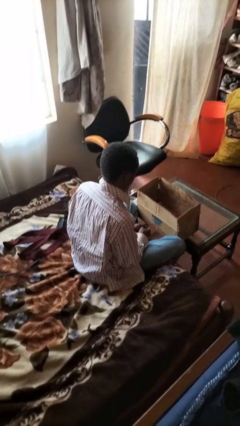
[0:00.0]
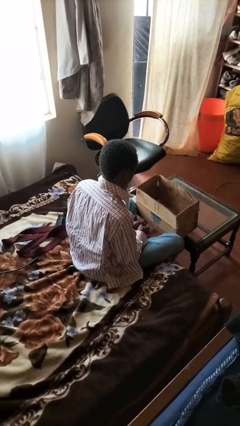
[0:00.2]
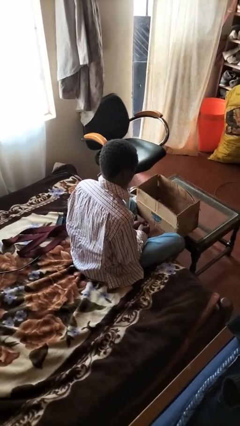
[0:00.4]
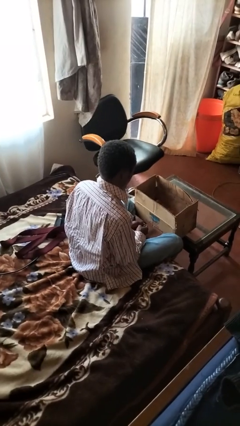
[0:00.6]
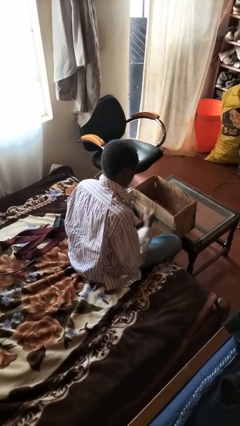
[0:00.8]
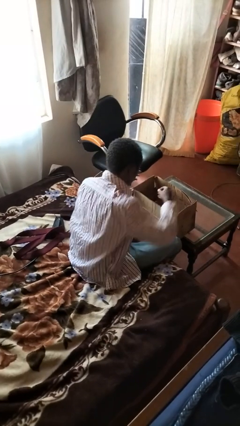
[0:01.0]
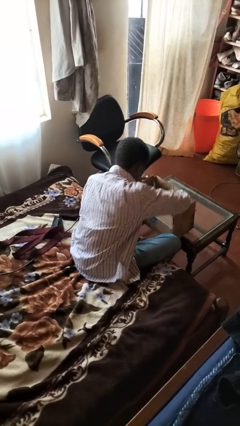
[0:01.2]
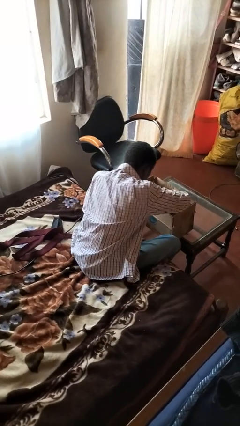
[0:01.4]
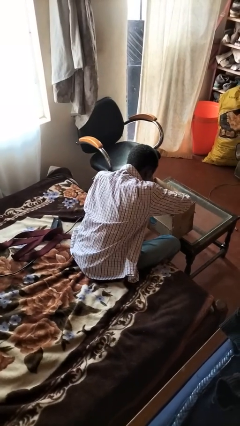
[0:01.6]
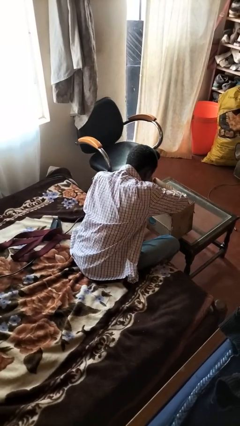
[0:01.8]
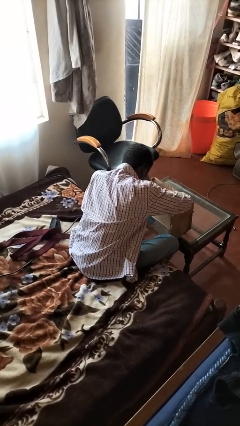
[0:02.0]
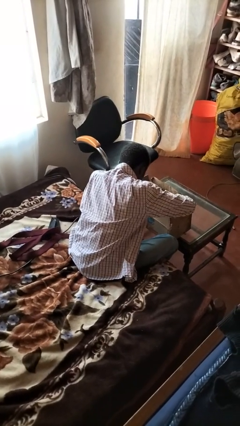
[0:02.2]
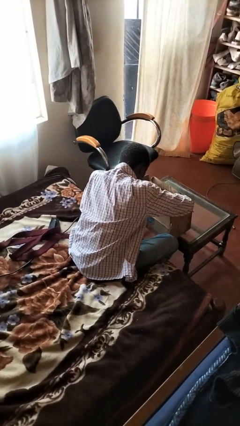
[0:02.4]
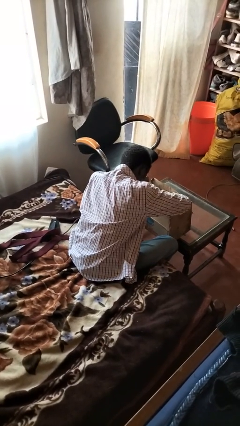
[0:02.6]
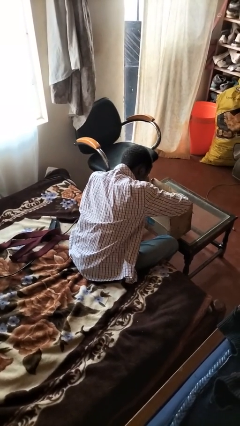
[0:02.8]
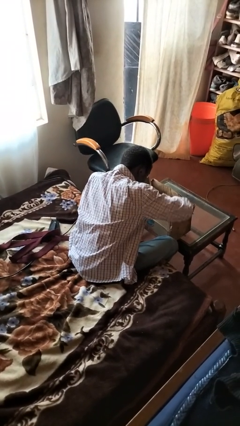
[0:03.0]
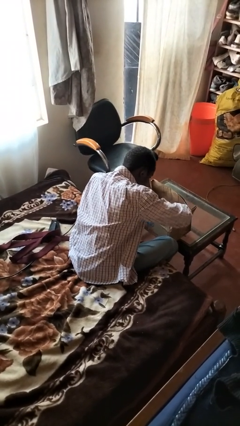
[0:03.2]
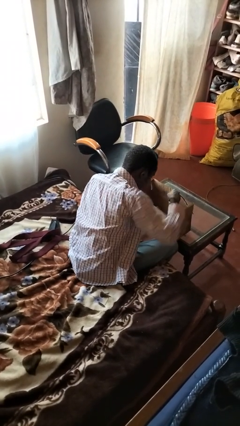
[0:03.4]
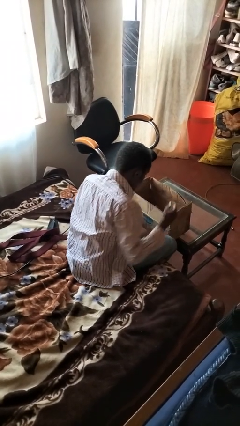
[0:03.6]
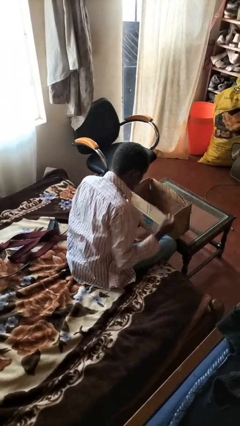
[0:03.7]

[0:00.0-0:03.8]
person searches in box

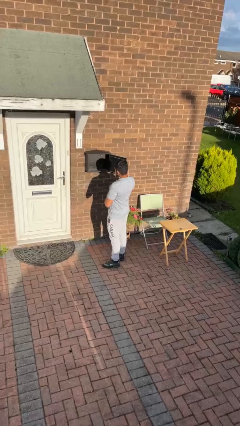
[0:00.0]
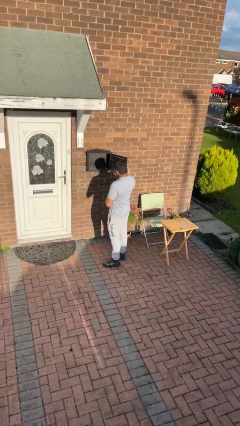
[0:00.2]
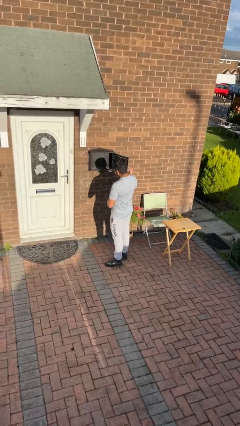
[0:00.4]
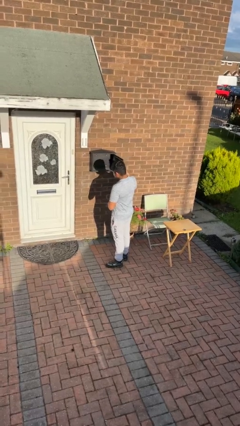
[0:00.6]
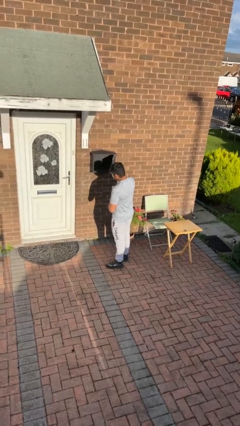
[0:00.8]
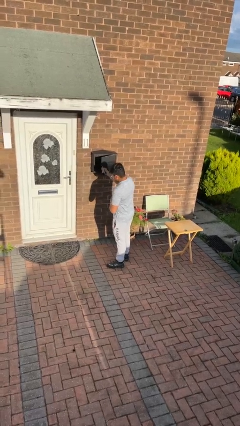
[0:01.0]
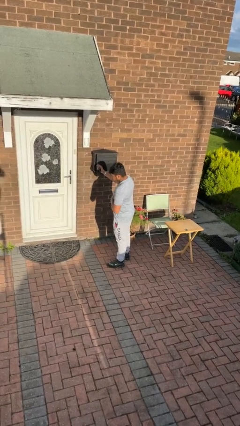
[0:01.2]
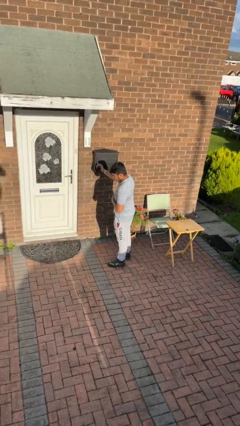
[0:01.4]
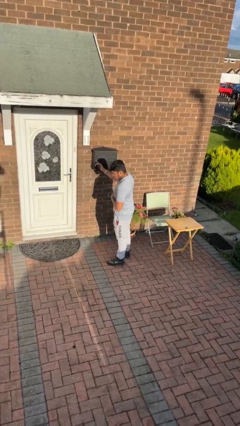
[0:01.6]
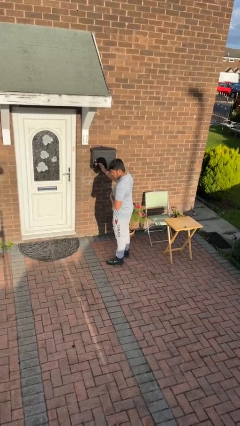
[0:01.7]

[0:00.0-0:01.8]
person closes mailbox

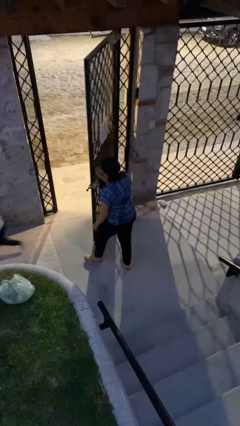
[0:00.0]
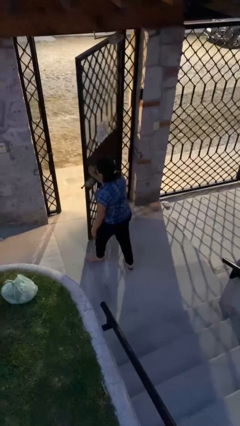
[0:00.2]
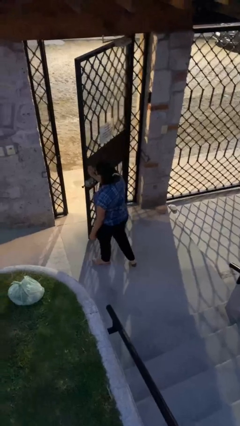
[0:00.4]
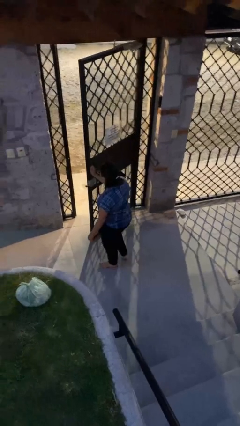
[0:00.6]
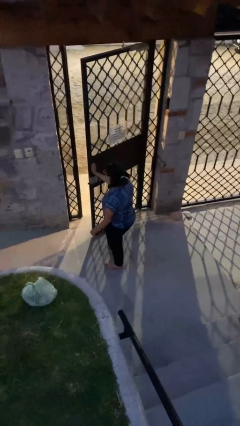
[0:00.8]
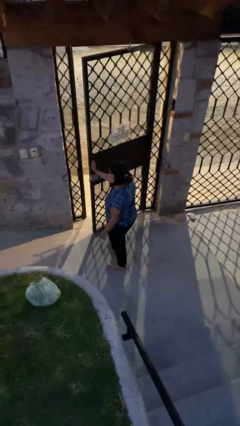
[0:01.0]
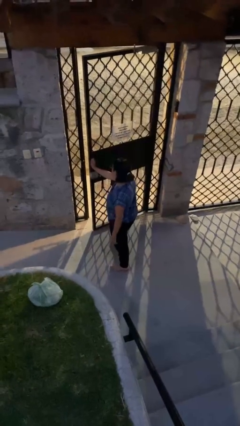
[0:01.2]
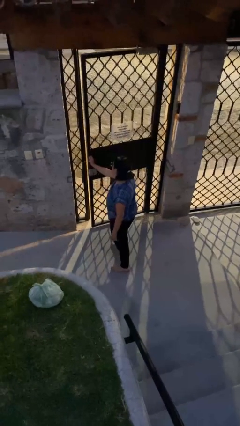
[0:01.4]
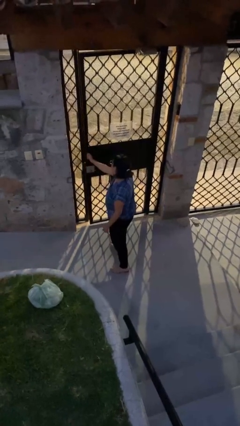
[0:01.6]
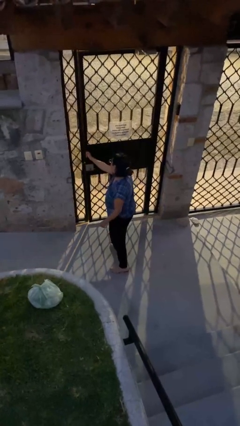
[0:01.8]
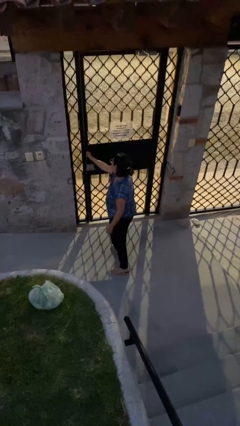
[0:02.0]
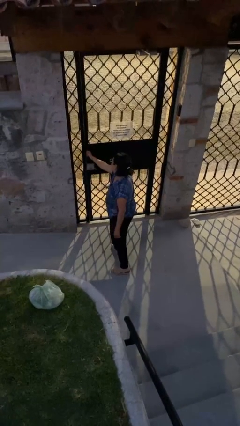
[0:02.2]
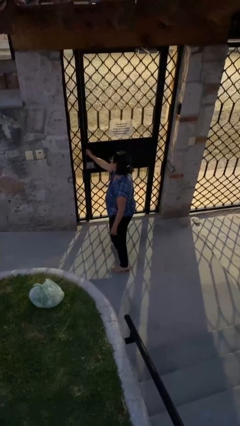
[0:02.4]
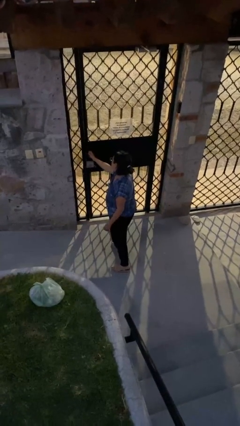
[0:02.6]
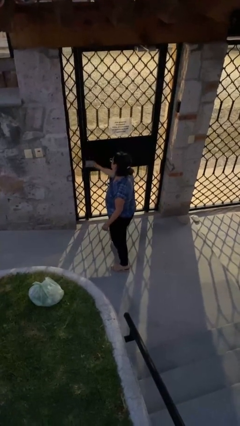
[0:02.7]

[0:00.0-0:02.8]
person closes facility door

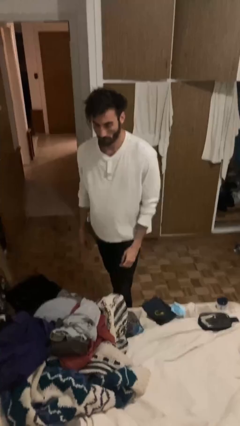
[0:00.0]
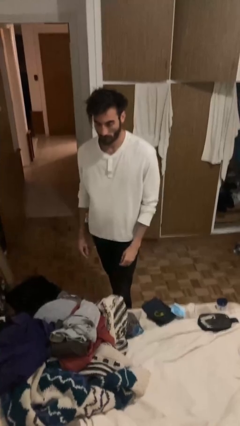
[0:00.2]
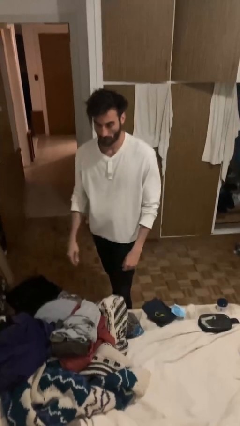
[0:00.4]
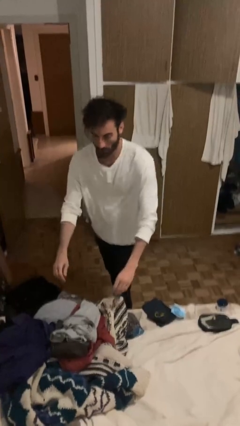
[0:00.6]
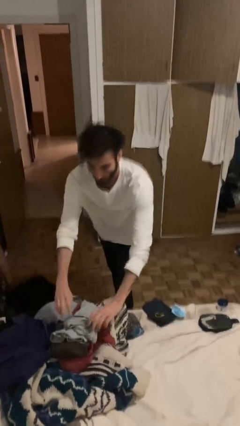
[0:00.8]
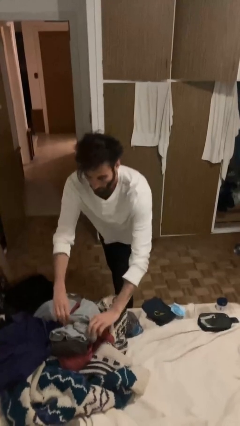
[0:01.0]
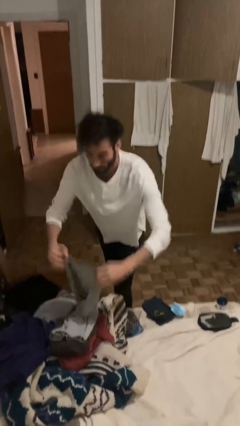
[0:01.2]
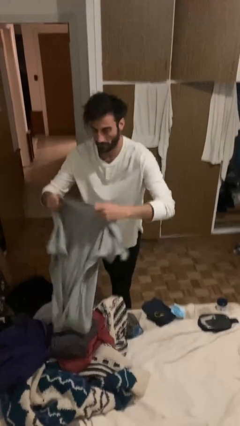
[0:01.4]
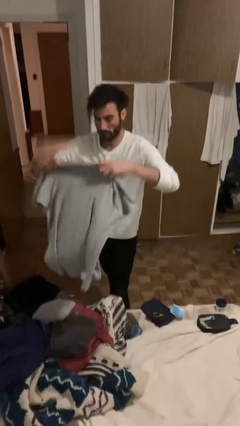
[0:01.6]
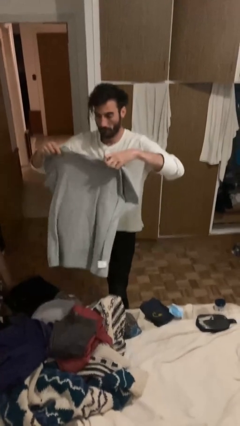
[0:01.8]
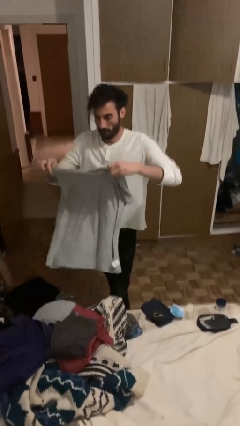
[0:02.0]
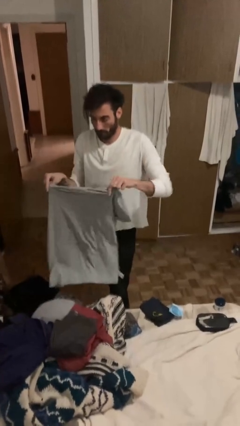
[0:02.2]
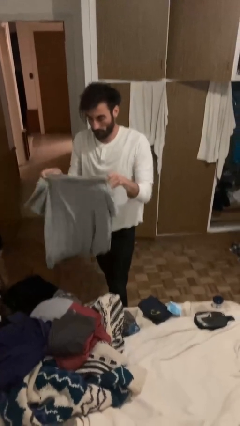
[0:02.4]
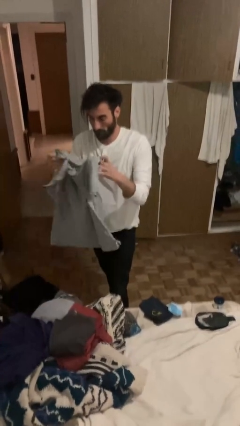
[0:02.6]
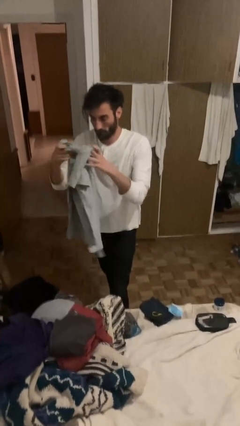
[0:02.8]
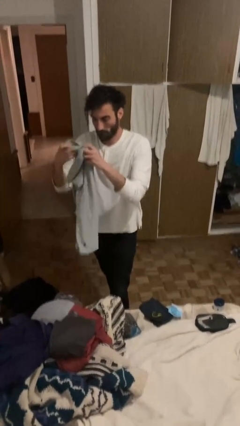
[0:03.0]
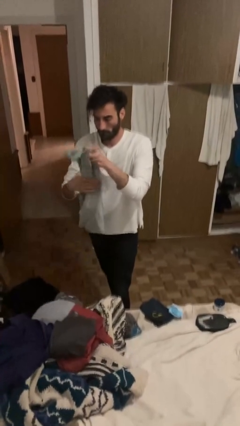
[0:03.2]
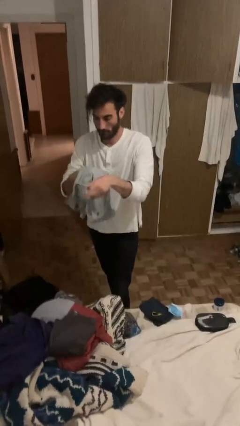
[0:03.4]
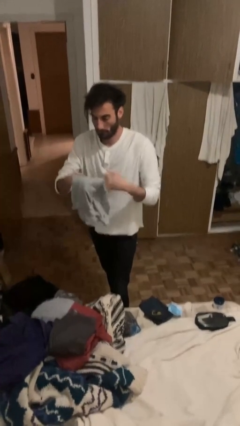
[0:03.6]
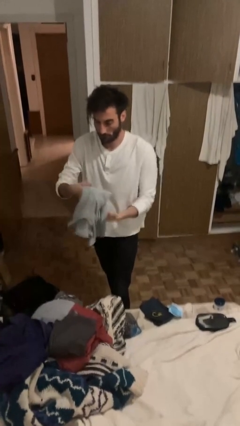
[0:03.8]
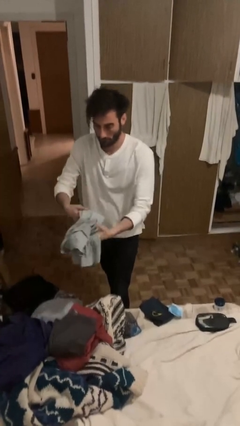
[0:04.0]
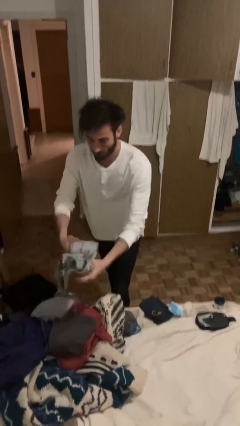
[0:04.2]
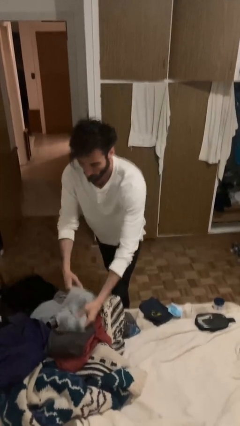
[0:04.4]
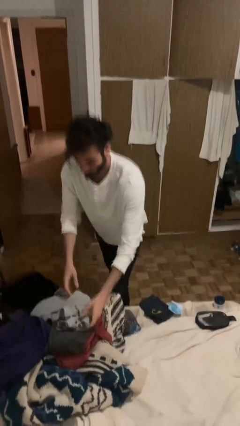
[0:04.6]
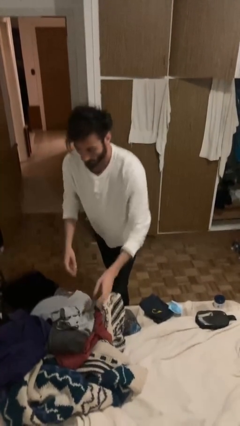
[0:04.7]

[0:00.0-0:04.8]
person folds shirt

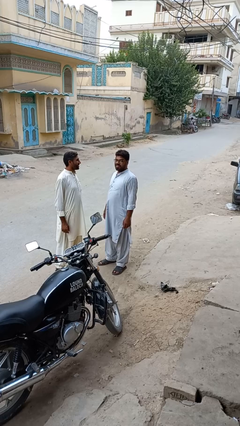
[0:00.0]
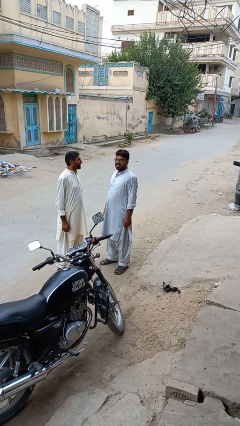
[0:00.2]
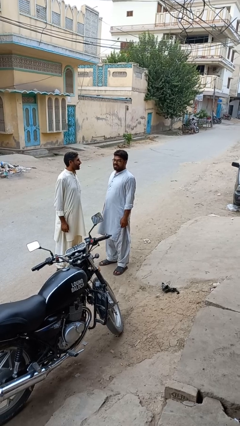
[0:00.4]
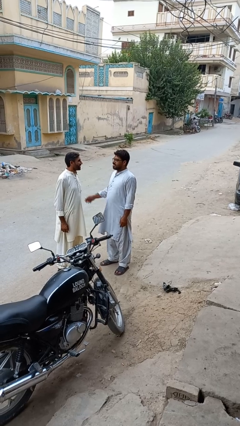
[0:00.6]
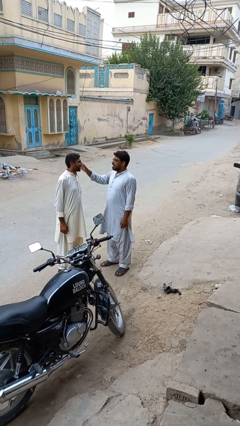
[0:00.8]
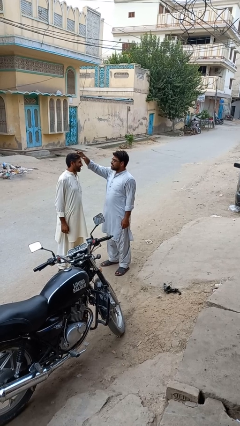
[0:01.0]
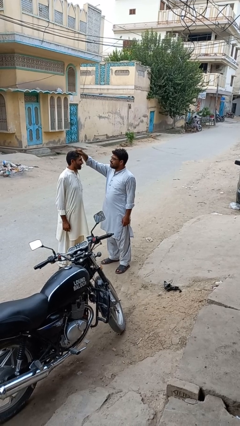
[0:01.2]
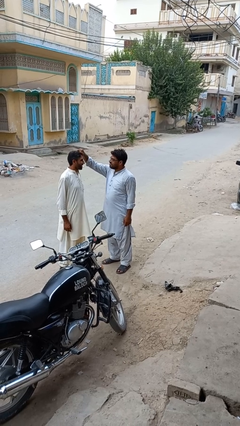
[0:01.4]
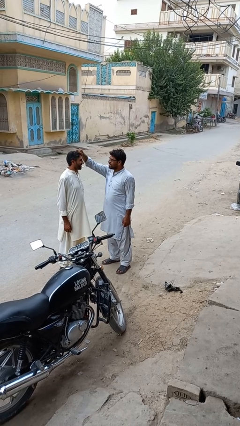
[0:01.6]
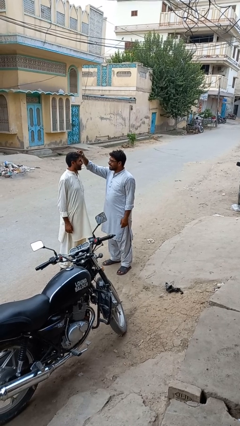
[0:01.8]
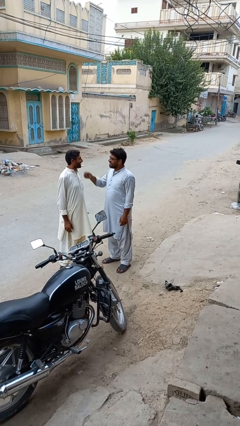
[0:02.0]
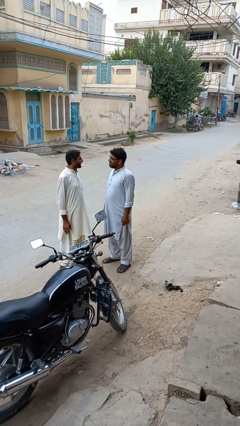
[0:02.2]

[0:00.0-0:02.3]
person grabs person by hair

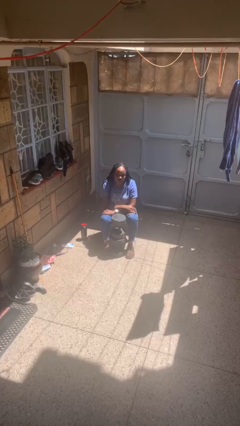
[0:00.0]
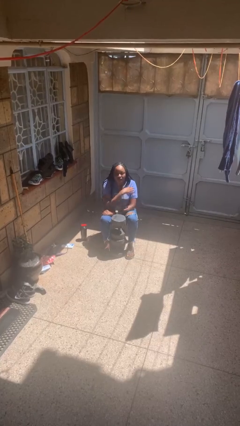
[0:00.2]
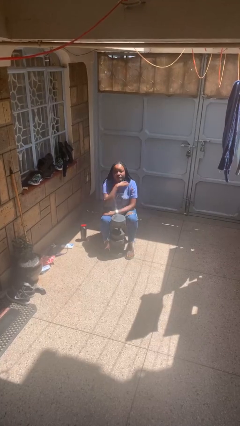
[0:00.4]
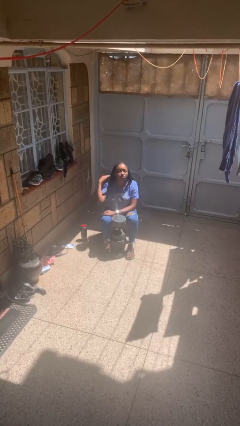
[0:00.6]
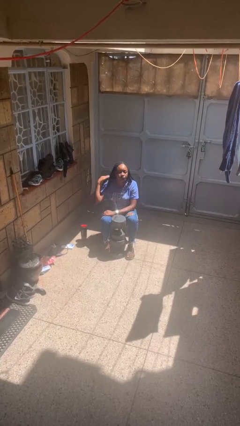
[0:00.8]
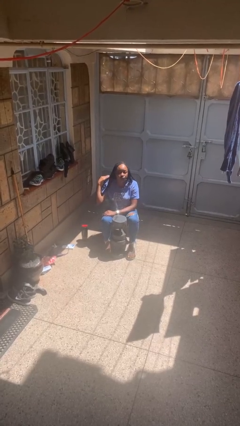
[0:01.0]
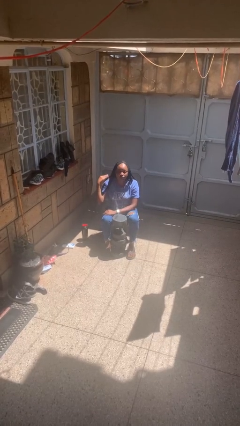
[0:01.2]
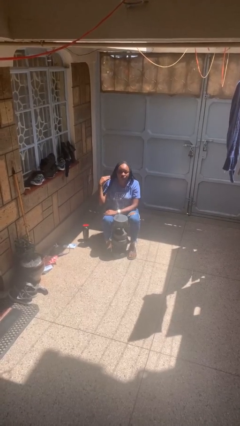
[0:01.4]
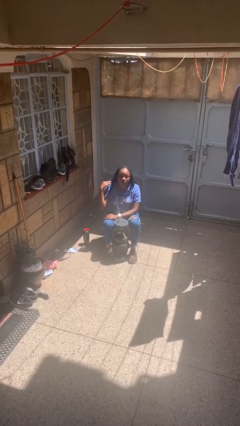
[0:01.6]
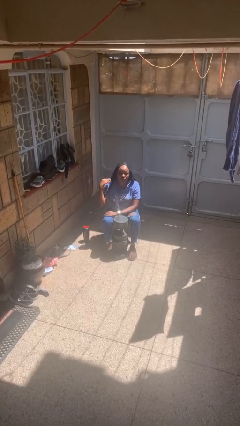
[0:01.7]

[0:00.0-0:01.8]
person gestures cut
